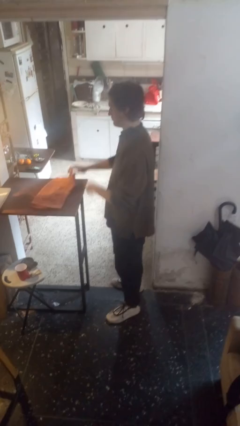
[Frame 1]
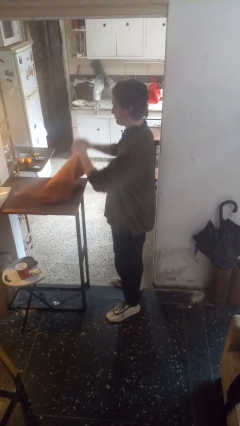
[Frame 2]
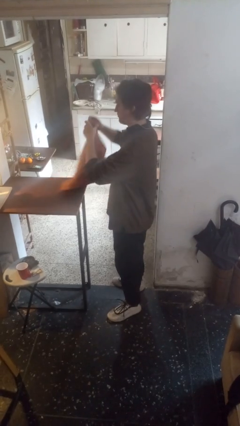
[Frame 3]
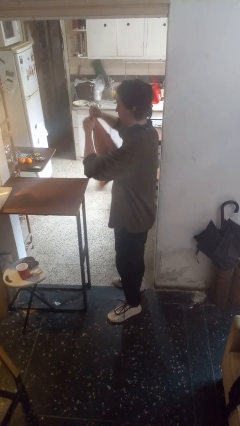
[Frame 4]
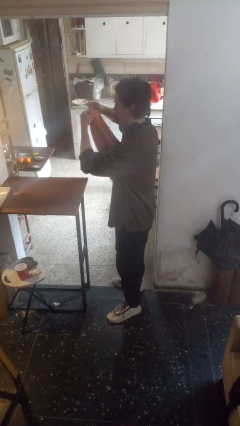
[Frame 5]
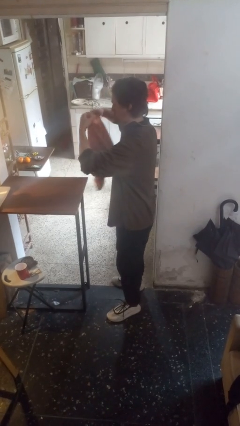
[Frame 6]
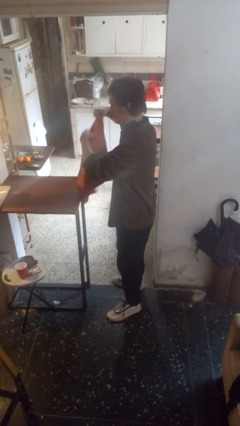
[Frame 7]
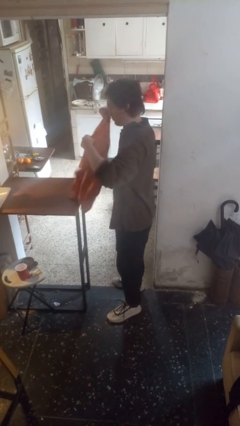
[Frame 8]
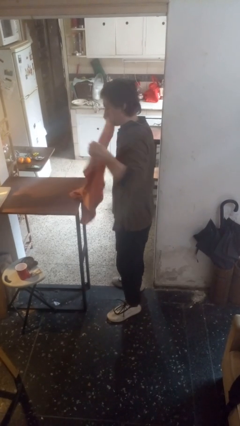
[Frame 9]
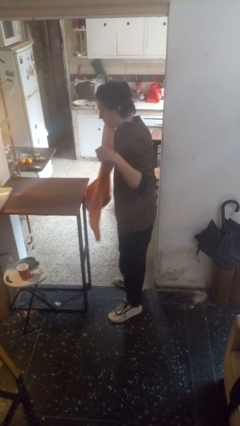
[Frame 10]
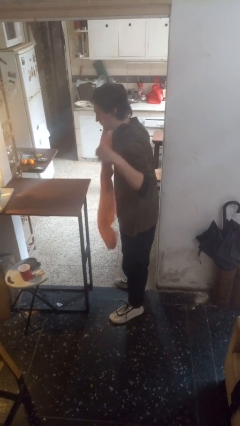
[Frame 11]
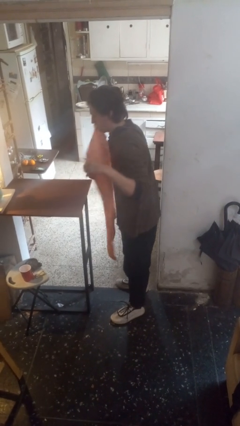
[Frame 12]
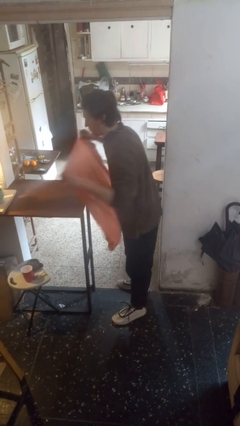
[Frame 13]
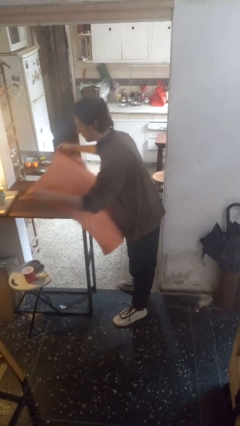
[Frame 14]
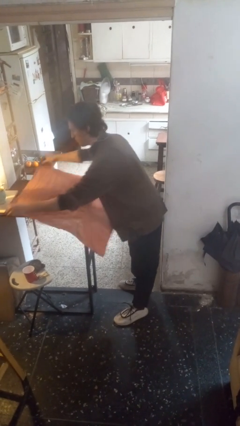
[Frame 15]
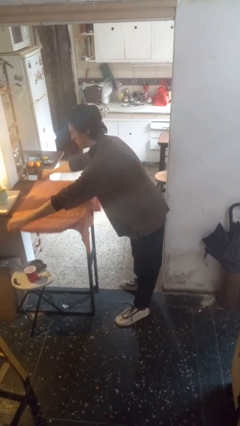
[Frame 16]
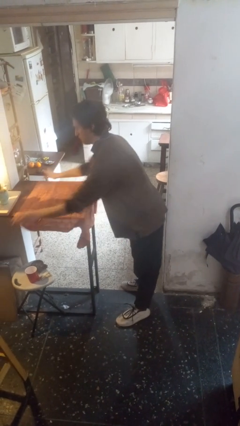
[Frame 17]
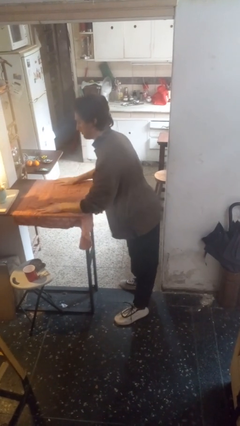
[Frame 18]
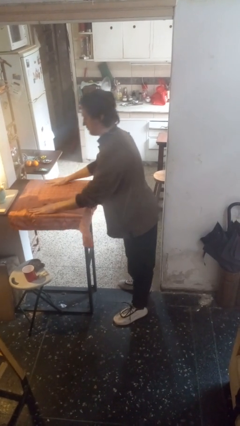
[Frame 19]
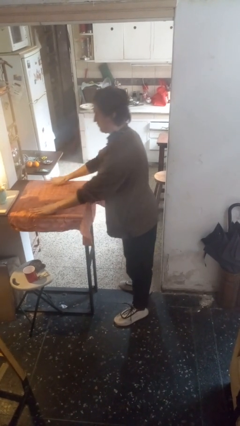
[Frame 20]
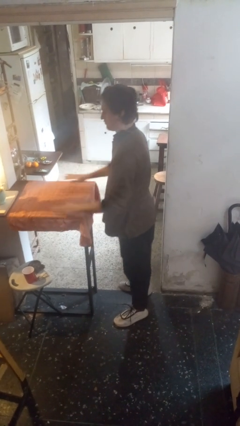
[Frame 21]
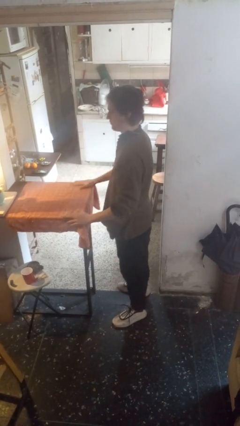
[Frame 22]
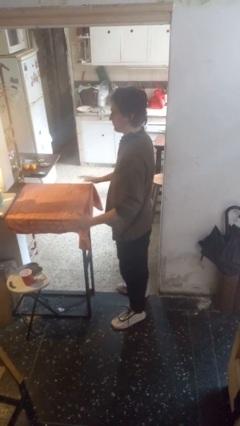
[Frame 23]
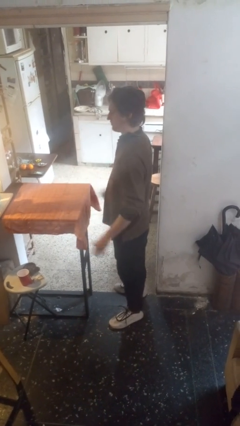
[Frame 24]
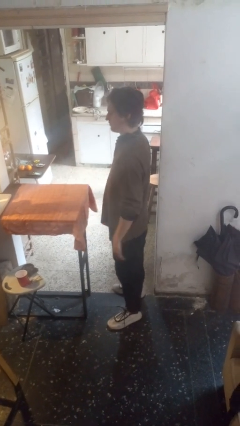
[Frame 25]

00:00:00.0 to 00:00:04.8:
person spreads tablecloth

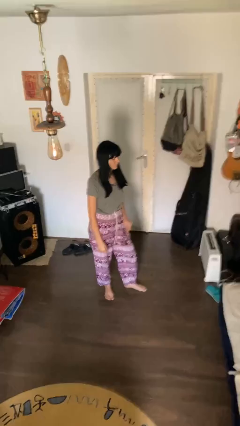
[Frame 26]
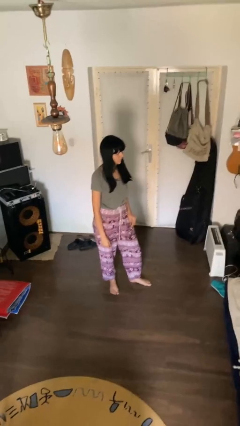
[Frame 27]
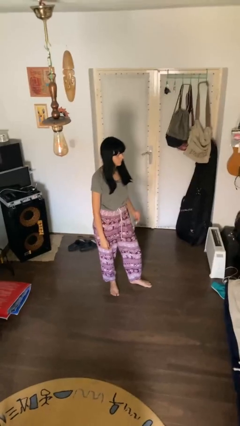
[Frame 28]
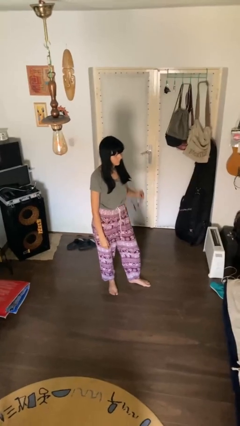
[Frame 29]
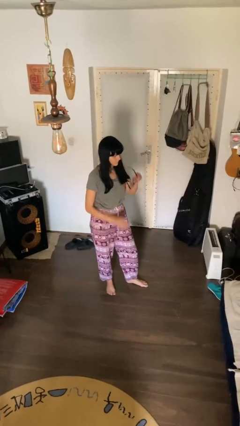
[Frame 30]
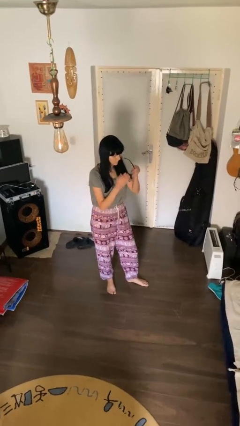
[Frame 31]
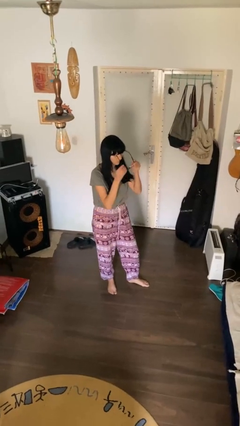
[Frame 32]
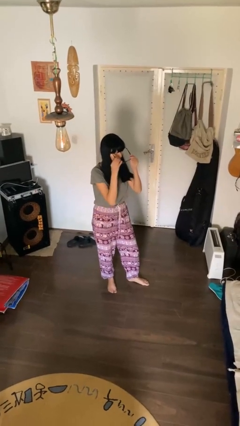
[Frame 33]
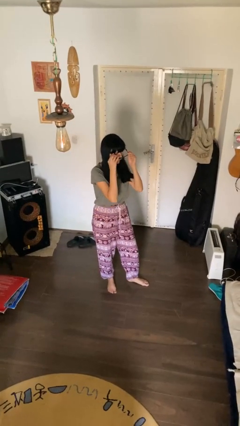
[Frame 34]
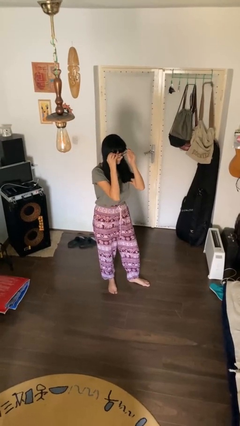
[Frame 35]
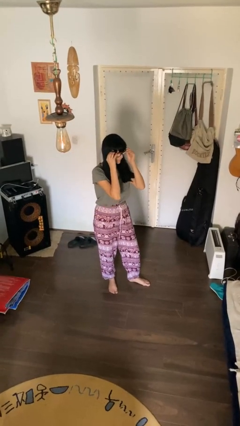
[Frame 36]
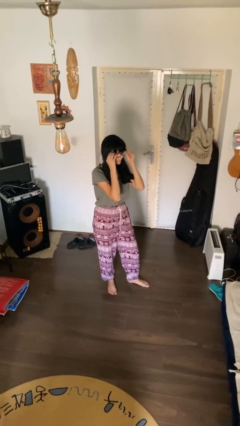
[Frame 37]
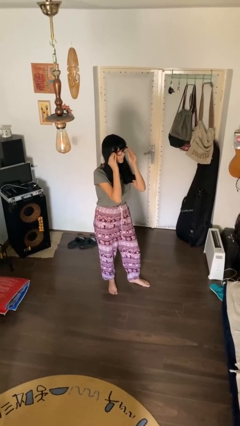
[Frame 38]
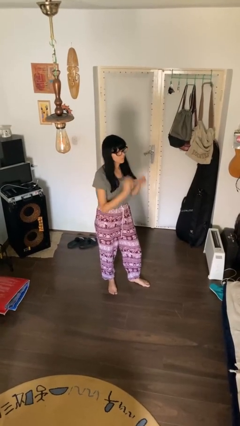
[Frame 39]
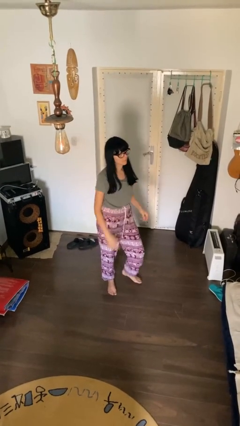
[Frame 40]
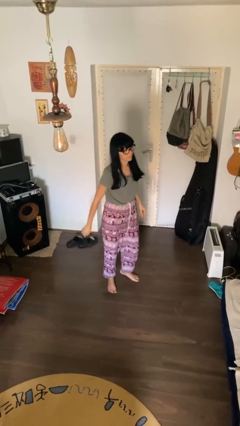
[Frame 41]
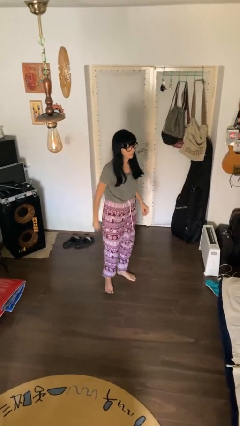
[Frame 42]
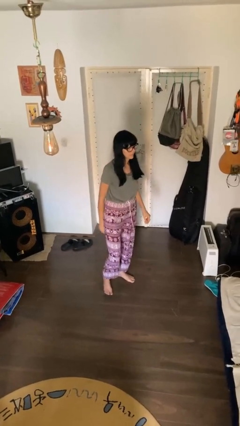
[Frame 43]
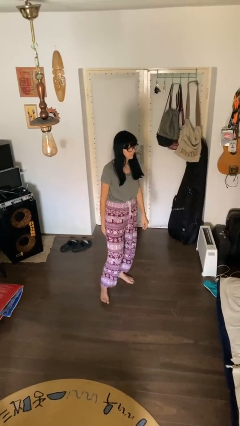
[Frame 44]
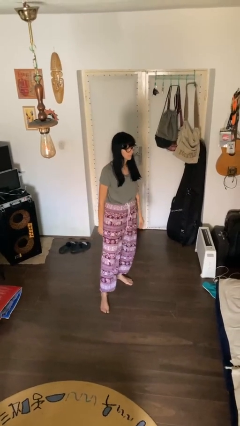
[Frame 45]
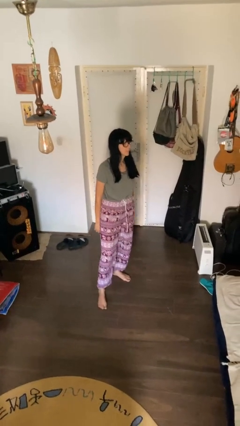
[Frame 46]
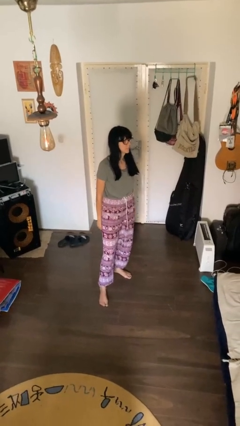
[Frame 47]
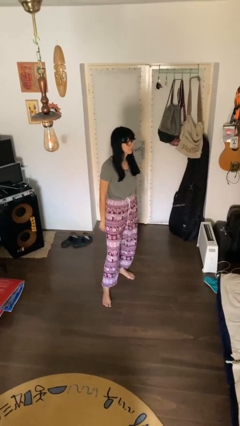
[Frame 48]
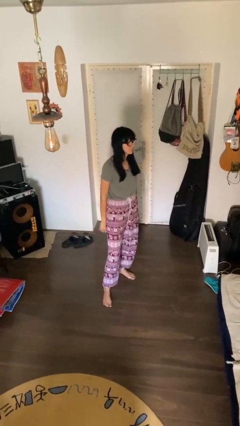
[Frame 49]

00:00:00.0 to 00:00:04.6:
person puts on glasses

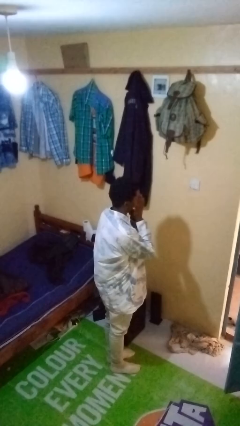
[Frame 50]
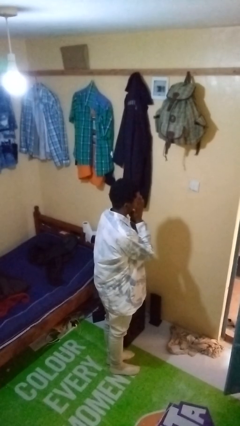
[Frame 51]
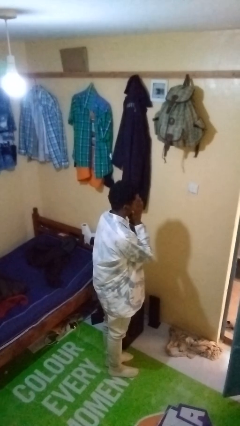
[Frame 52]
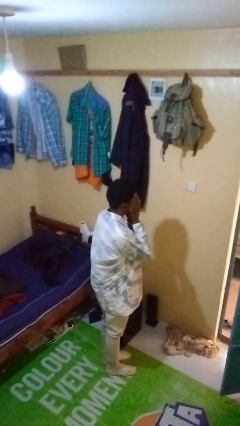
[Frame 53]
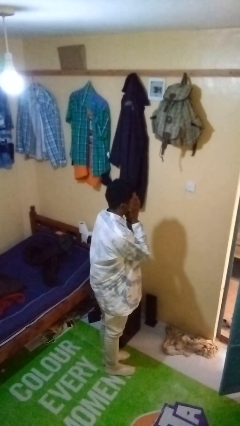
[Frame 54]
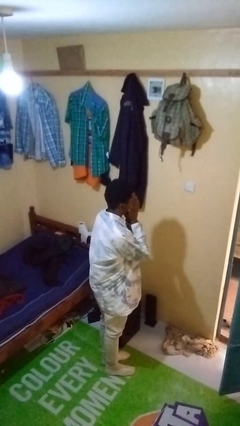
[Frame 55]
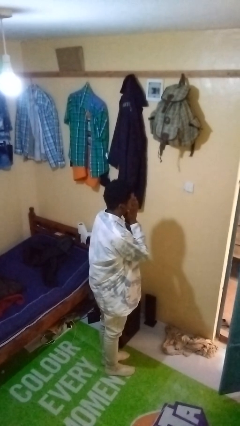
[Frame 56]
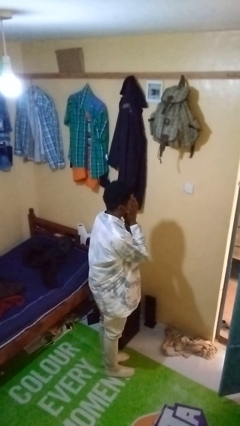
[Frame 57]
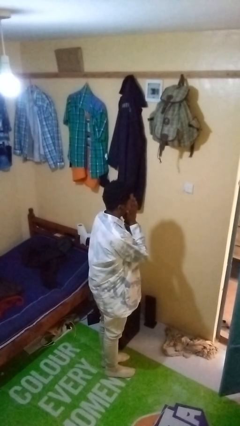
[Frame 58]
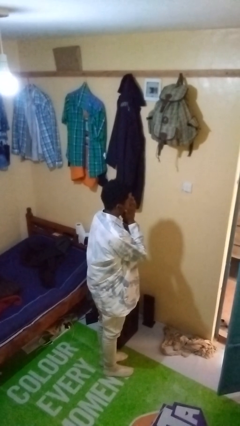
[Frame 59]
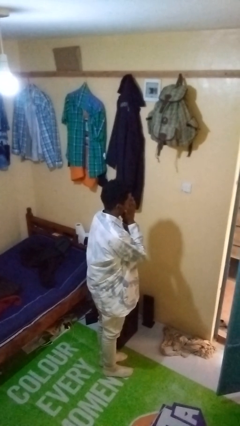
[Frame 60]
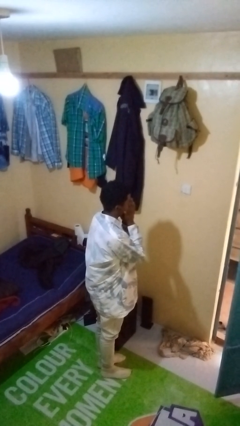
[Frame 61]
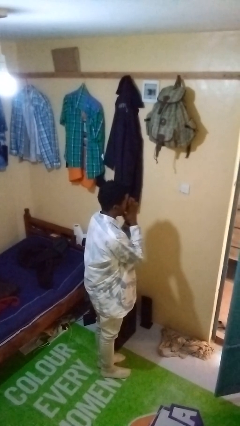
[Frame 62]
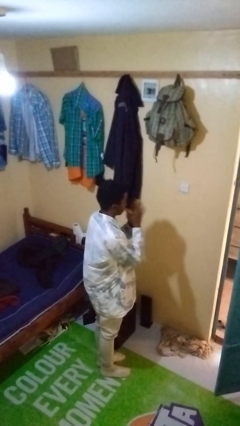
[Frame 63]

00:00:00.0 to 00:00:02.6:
person covers face with hands

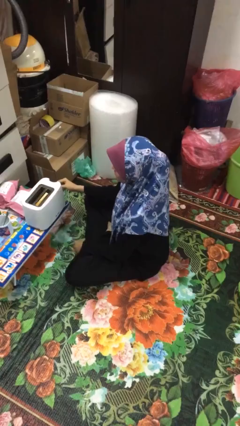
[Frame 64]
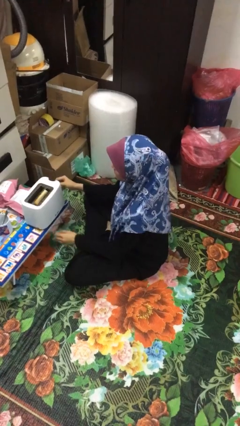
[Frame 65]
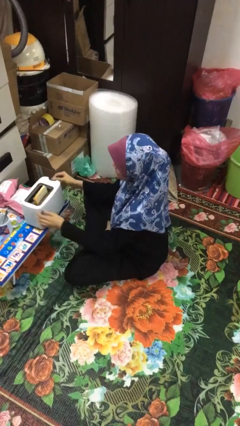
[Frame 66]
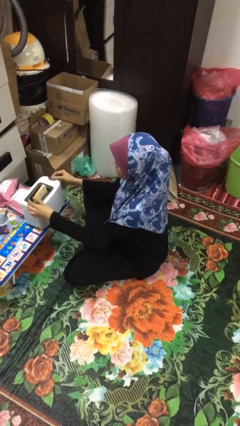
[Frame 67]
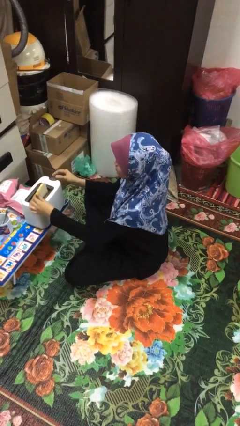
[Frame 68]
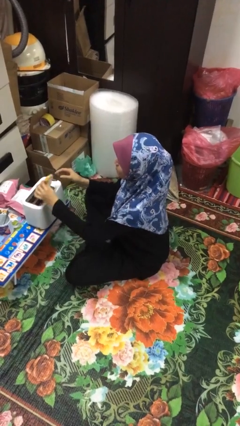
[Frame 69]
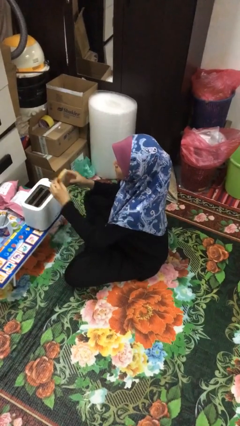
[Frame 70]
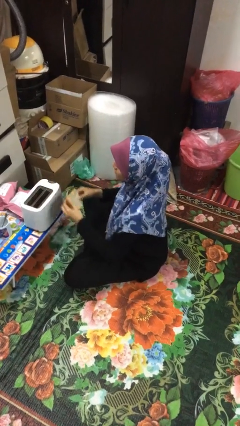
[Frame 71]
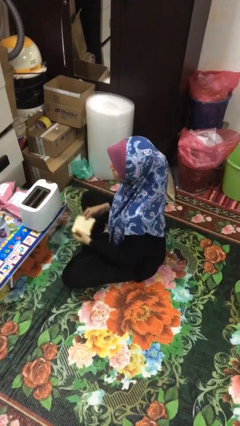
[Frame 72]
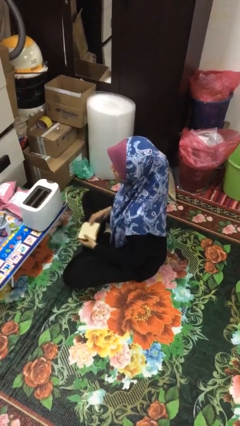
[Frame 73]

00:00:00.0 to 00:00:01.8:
person takes object from toaster

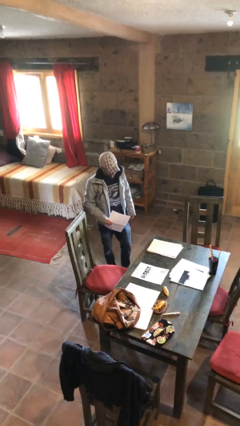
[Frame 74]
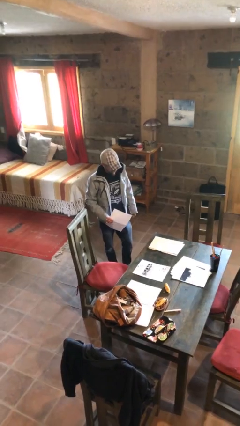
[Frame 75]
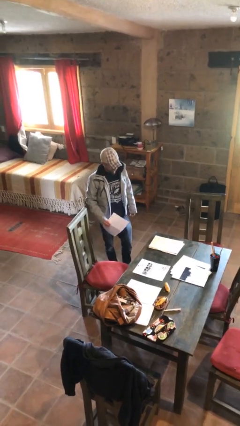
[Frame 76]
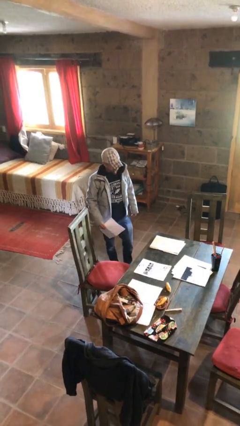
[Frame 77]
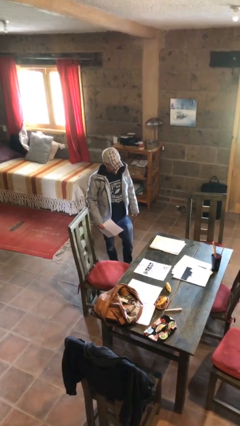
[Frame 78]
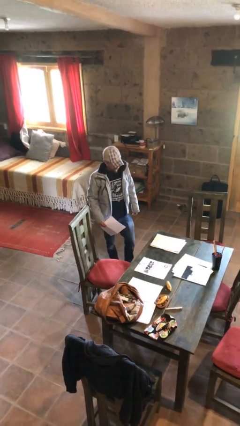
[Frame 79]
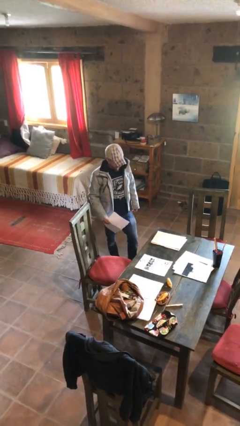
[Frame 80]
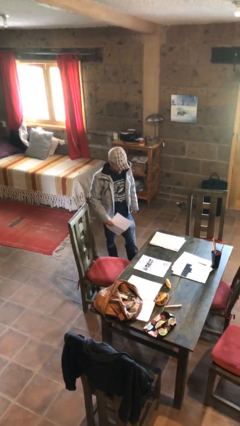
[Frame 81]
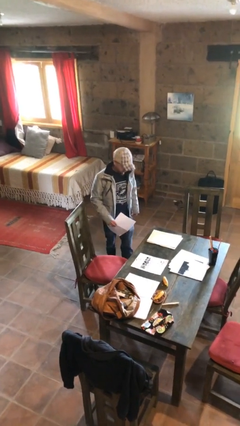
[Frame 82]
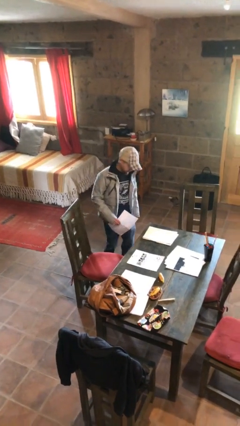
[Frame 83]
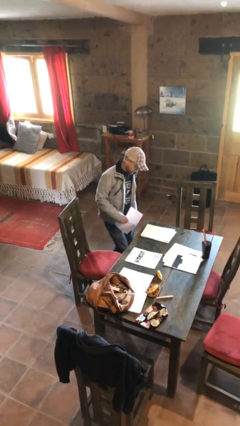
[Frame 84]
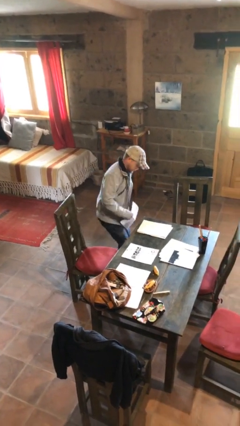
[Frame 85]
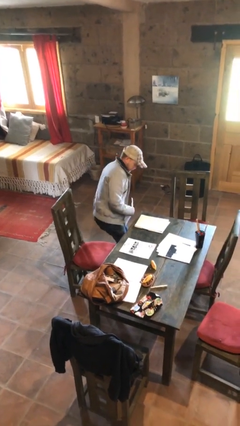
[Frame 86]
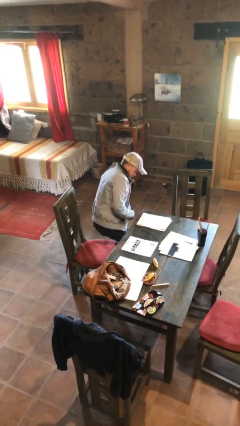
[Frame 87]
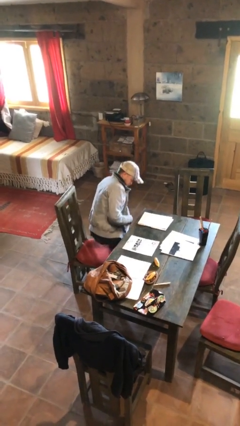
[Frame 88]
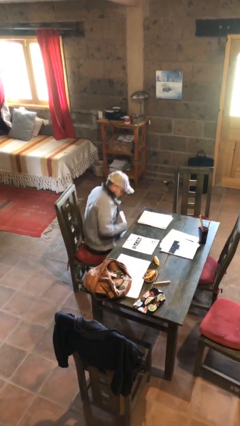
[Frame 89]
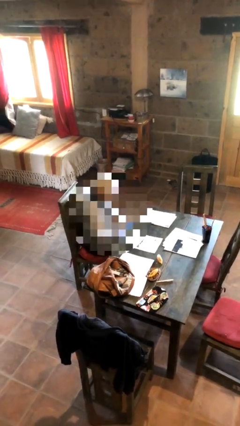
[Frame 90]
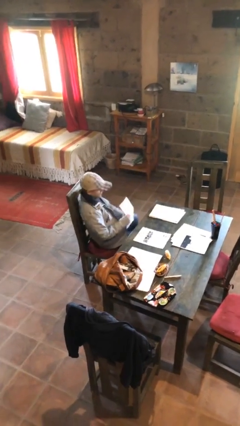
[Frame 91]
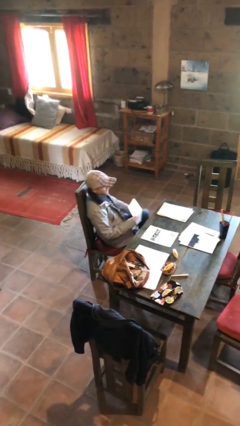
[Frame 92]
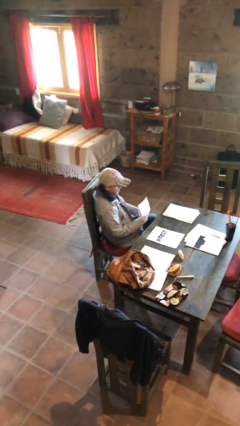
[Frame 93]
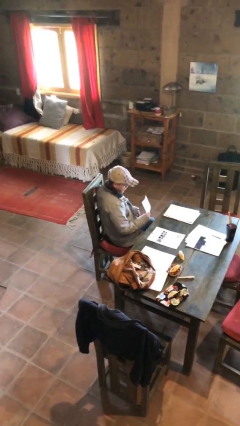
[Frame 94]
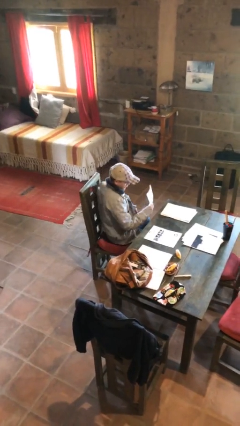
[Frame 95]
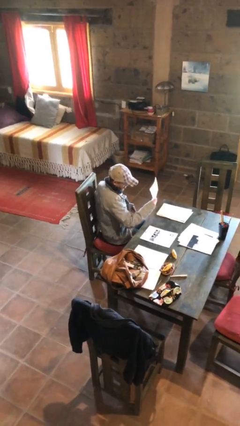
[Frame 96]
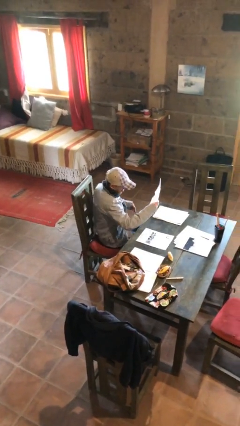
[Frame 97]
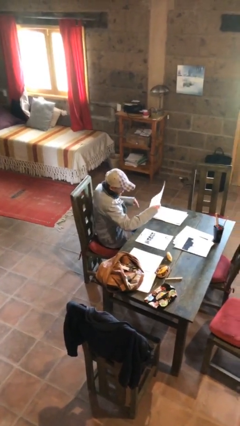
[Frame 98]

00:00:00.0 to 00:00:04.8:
person sits down
